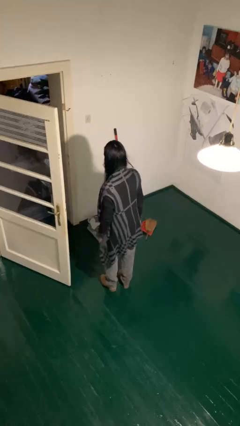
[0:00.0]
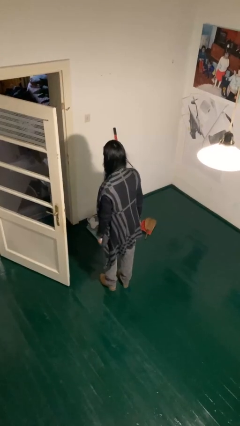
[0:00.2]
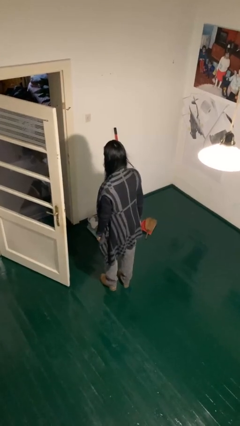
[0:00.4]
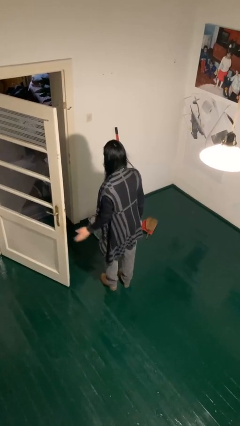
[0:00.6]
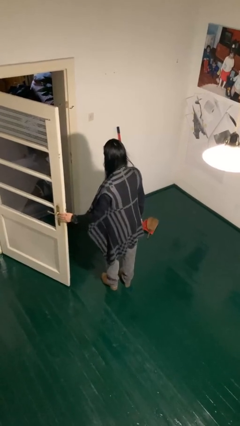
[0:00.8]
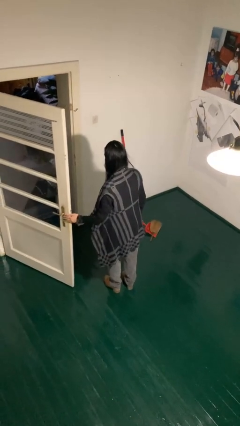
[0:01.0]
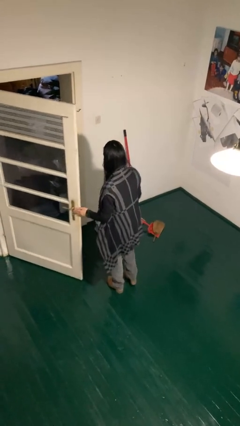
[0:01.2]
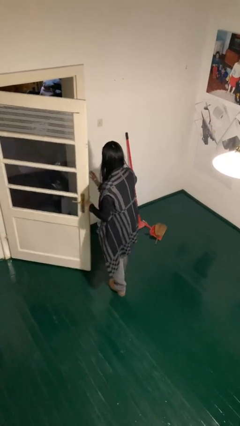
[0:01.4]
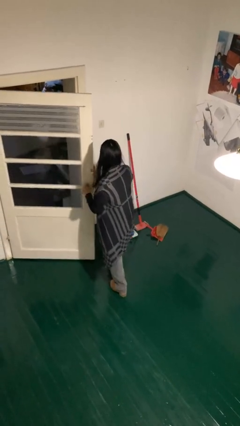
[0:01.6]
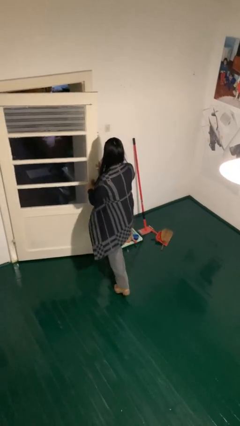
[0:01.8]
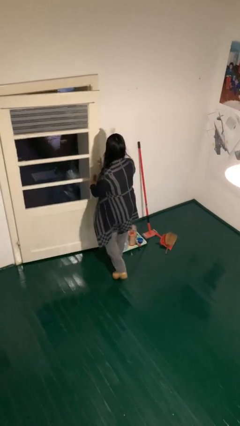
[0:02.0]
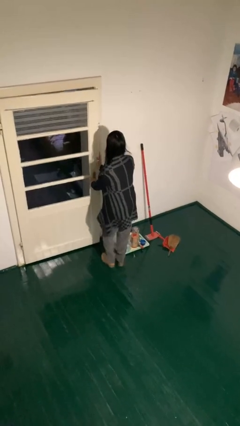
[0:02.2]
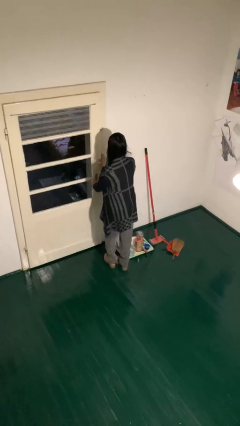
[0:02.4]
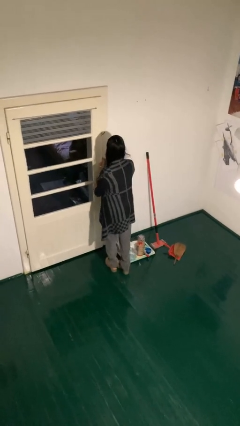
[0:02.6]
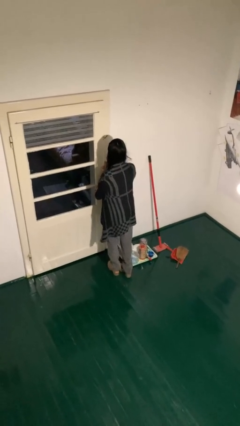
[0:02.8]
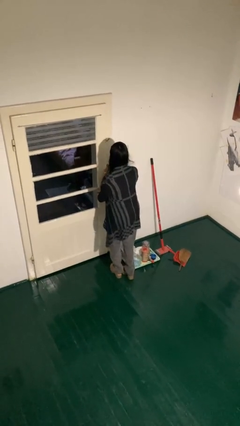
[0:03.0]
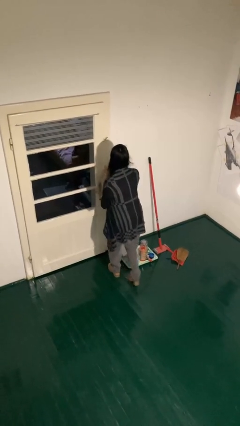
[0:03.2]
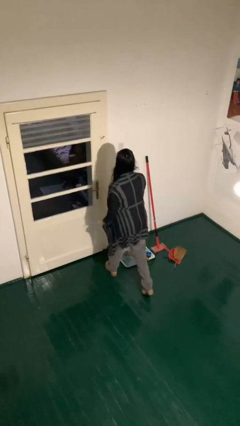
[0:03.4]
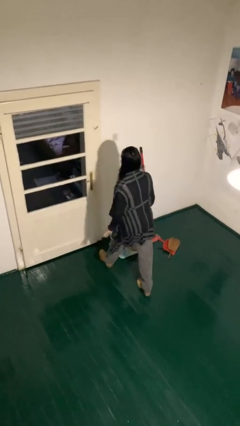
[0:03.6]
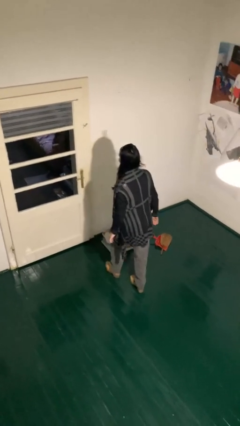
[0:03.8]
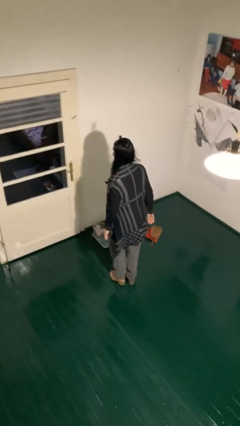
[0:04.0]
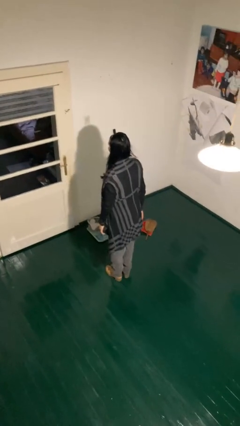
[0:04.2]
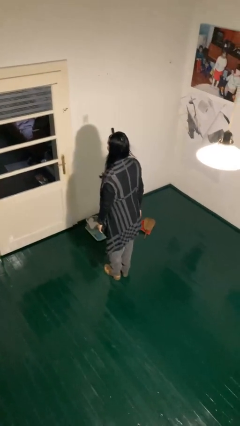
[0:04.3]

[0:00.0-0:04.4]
person closes facility door

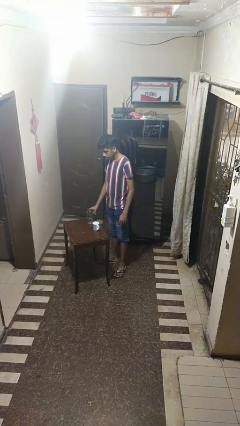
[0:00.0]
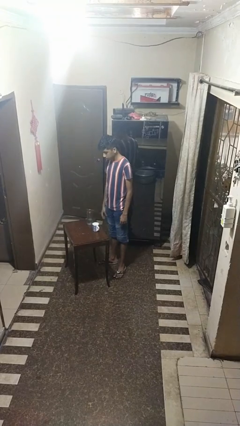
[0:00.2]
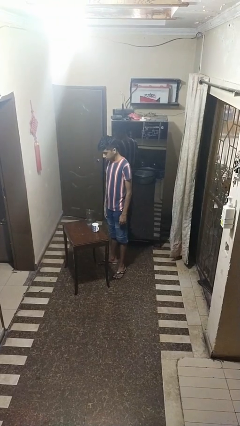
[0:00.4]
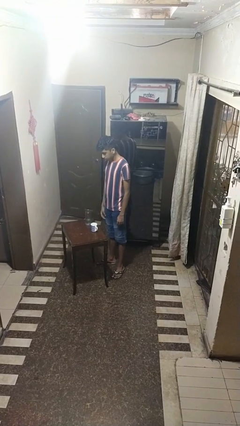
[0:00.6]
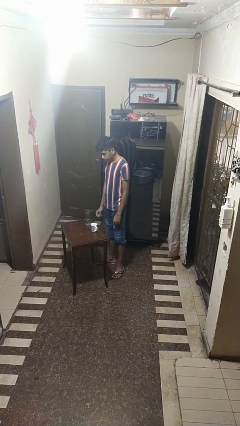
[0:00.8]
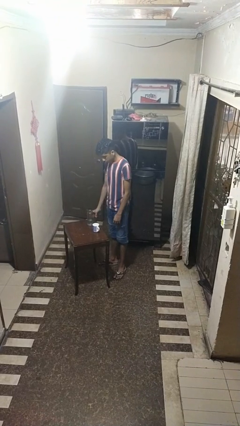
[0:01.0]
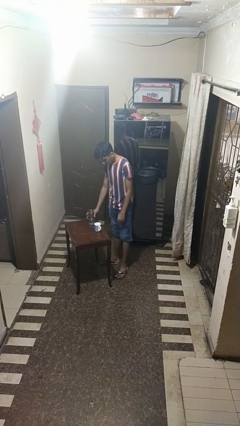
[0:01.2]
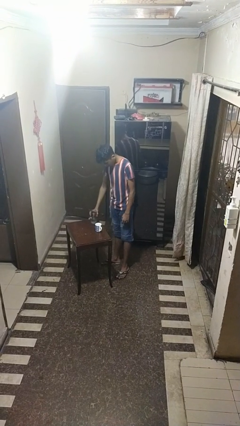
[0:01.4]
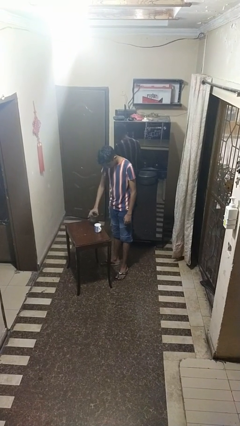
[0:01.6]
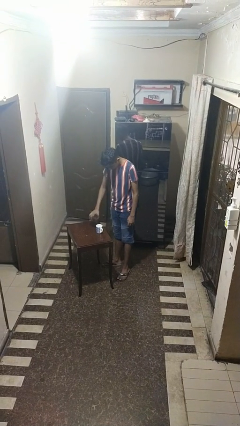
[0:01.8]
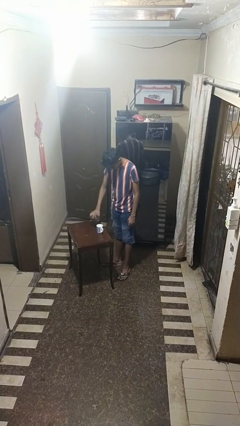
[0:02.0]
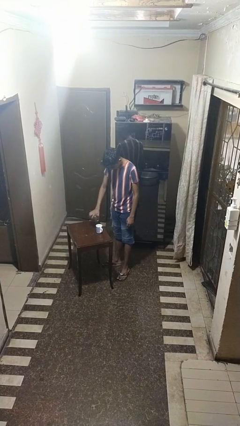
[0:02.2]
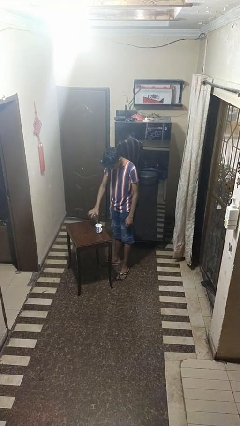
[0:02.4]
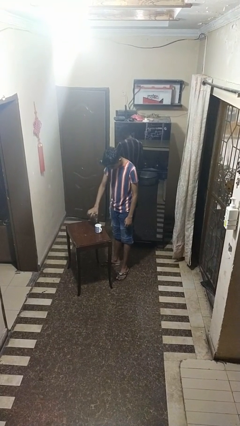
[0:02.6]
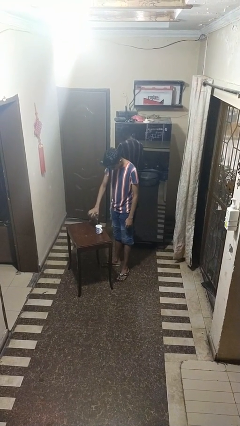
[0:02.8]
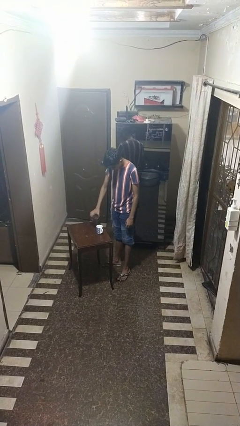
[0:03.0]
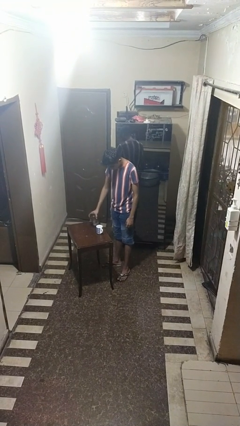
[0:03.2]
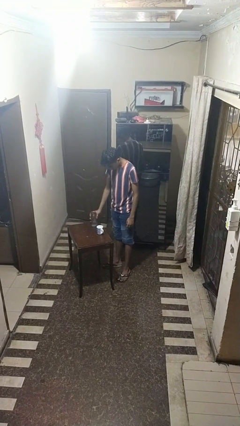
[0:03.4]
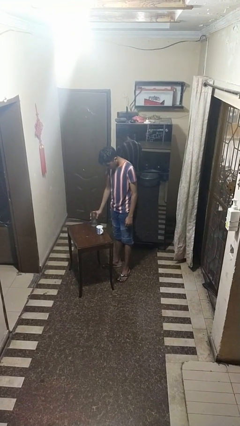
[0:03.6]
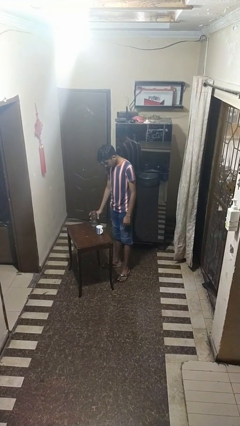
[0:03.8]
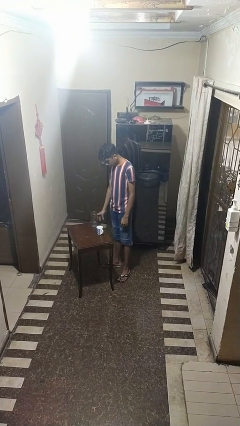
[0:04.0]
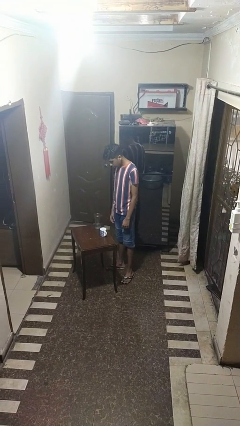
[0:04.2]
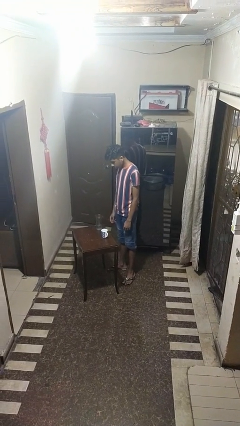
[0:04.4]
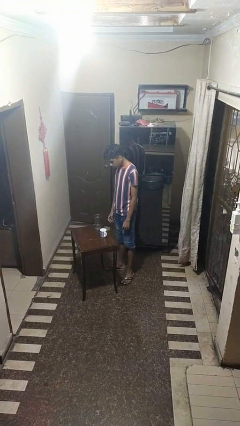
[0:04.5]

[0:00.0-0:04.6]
person pours liquid into cup

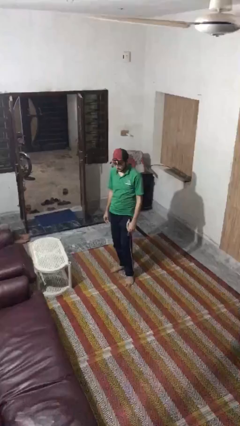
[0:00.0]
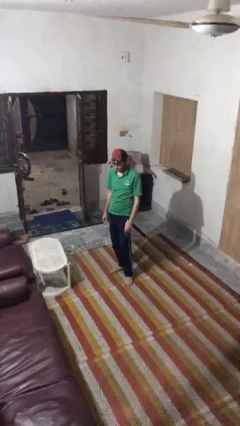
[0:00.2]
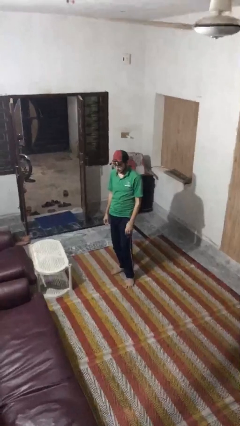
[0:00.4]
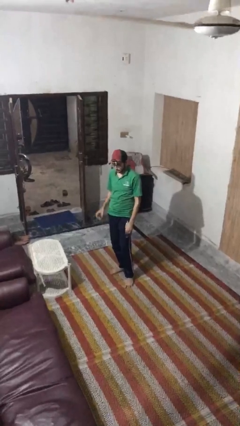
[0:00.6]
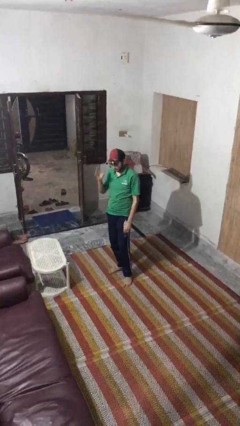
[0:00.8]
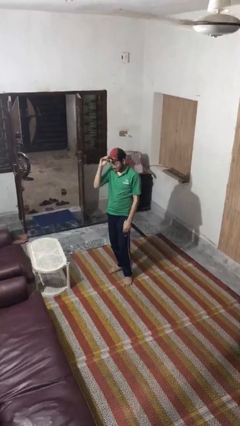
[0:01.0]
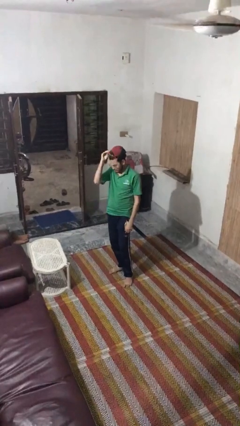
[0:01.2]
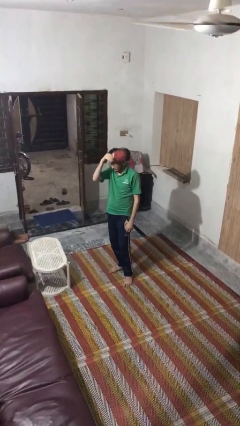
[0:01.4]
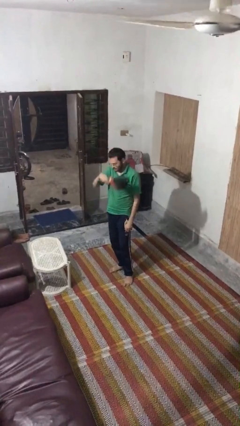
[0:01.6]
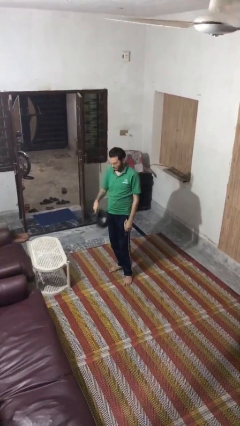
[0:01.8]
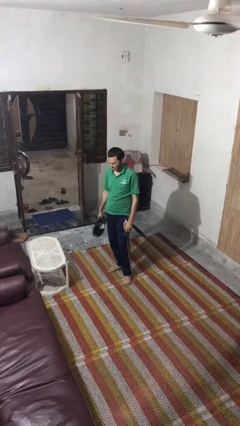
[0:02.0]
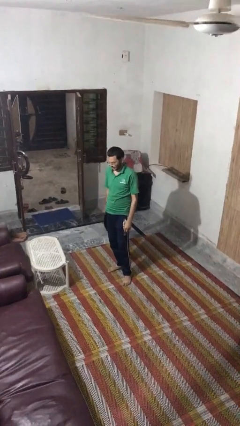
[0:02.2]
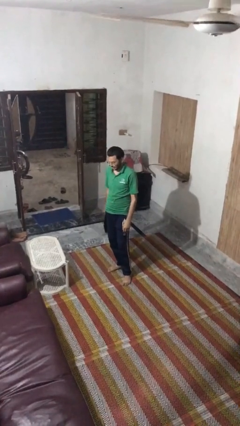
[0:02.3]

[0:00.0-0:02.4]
person takes off hat

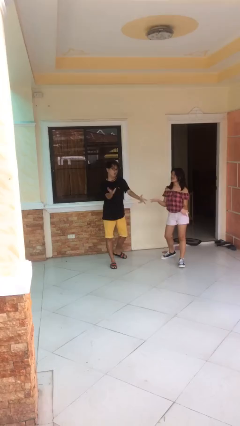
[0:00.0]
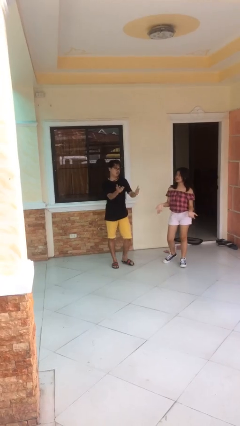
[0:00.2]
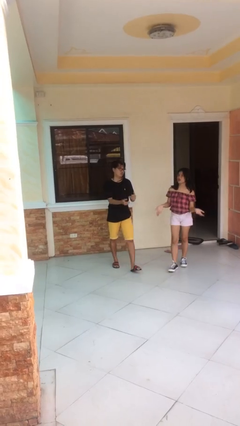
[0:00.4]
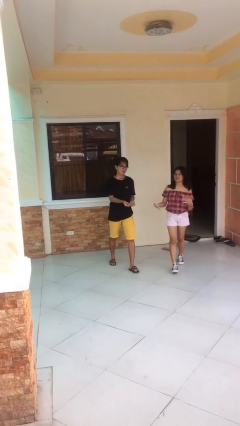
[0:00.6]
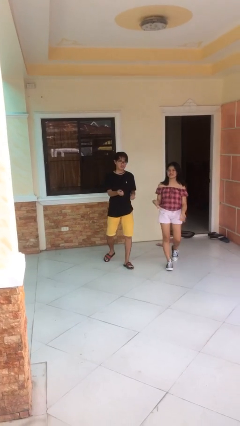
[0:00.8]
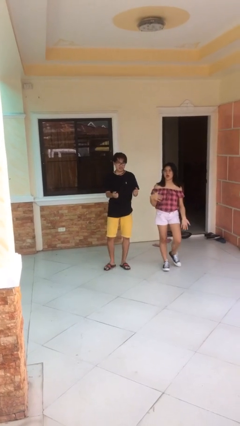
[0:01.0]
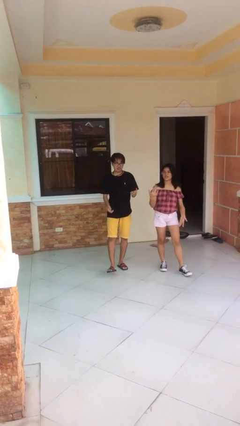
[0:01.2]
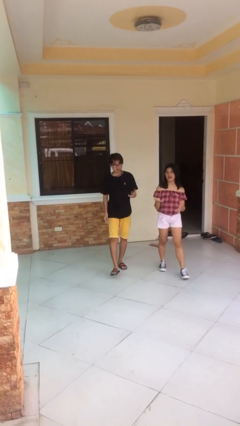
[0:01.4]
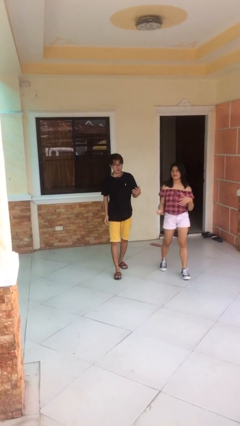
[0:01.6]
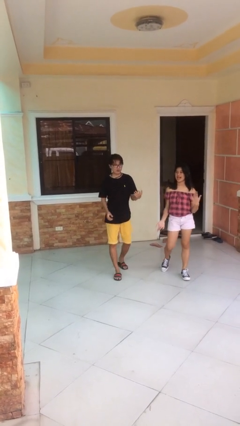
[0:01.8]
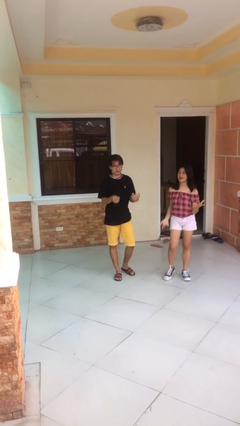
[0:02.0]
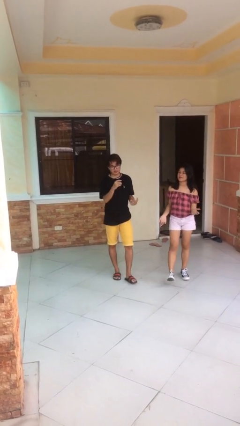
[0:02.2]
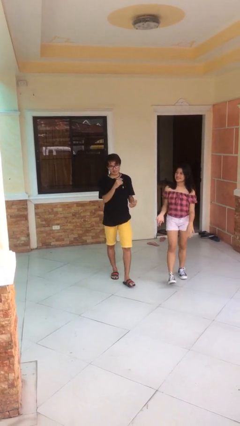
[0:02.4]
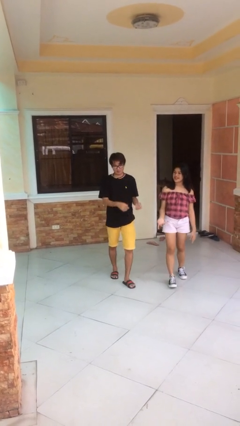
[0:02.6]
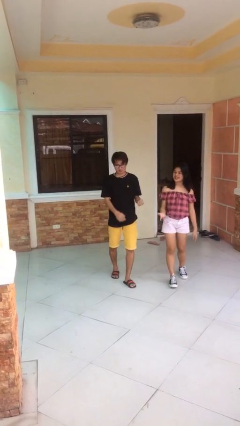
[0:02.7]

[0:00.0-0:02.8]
person talks to person

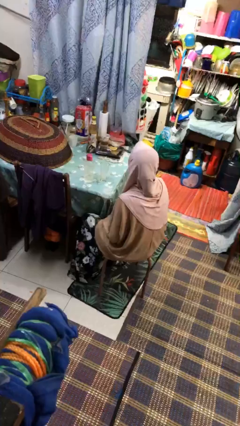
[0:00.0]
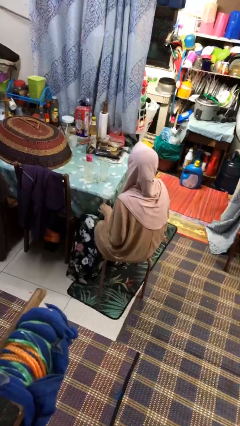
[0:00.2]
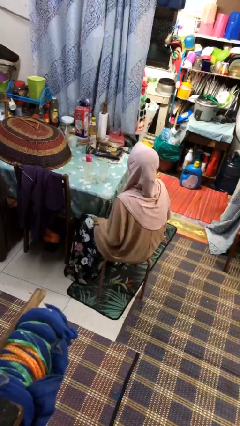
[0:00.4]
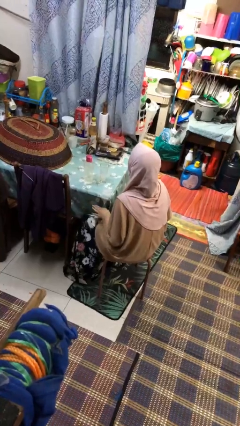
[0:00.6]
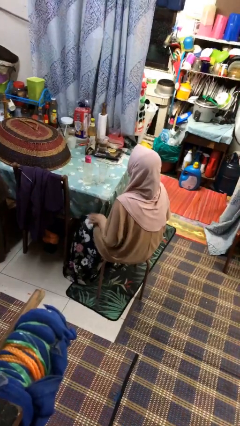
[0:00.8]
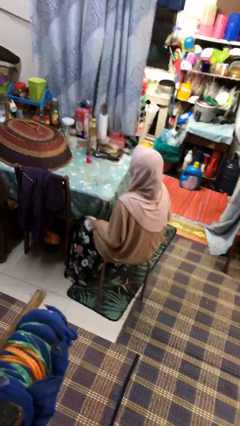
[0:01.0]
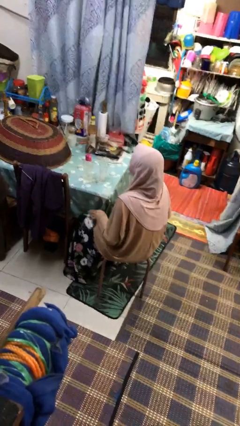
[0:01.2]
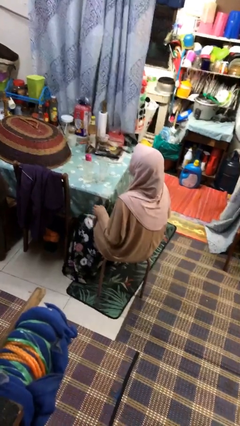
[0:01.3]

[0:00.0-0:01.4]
person slaps hands on thighs

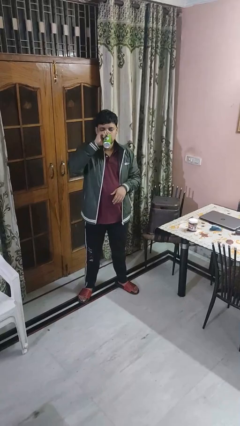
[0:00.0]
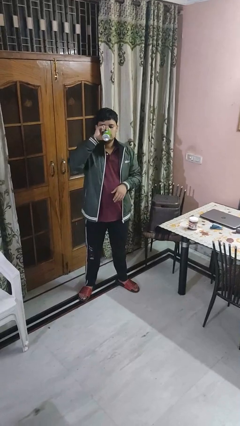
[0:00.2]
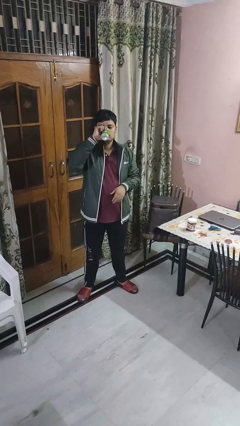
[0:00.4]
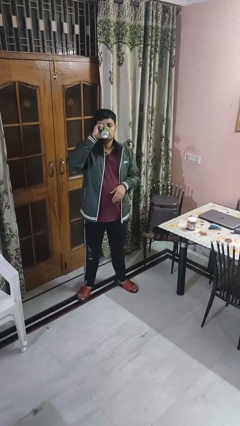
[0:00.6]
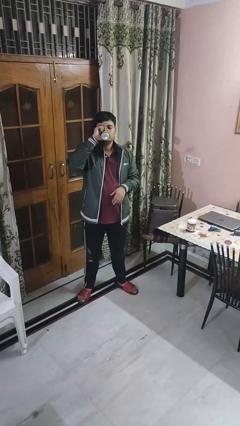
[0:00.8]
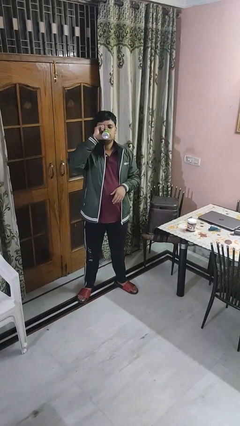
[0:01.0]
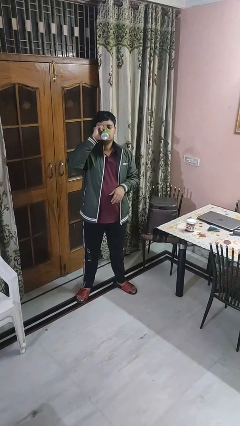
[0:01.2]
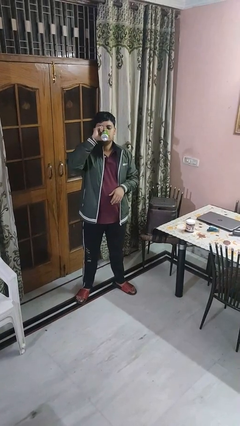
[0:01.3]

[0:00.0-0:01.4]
person drinks from beverage can

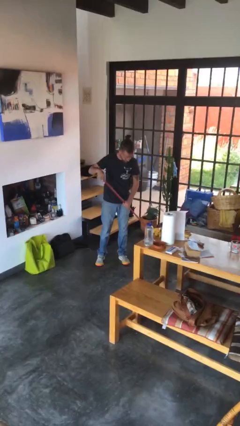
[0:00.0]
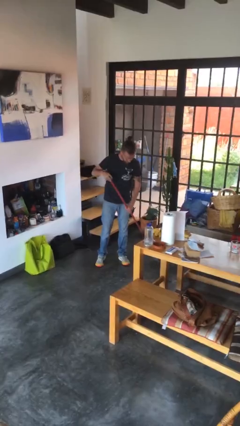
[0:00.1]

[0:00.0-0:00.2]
person mops
